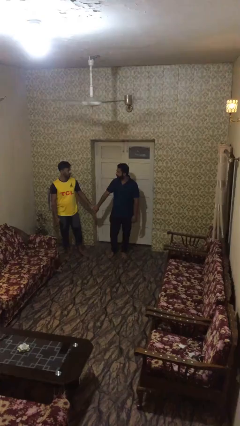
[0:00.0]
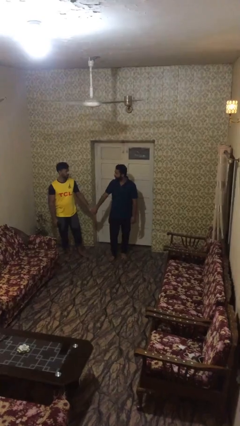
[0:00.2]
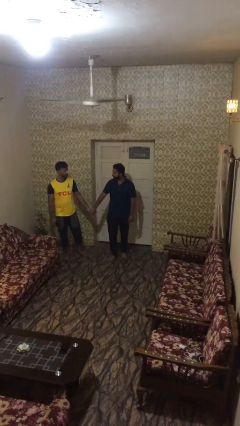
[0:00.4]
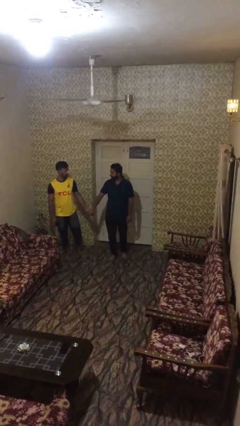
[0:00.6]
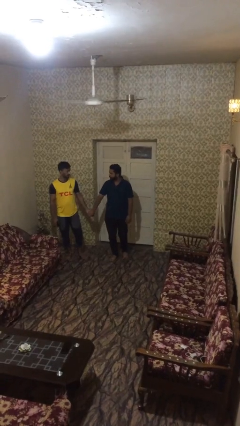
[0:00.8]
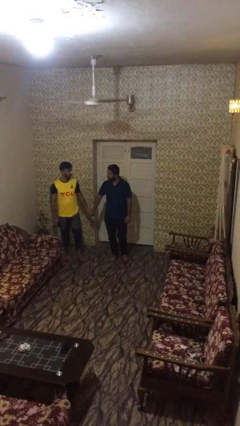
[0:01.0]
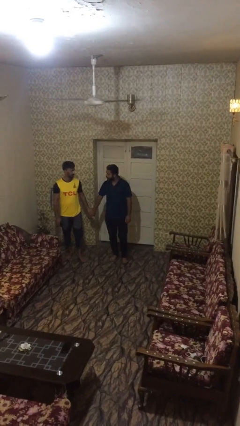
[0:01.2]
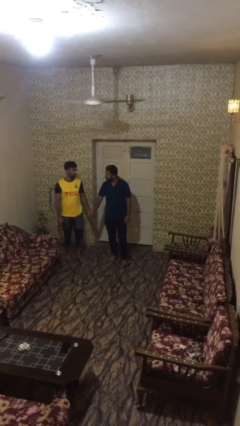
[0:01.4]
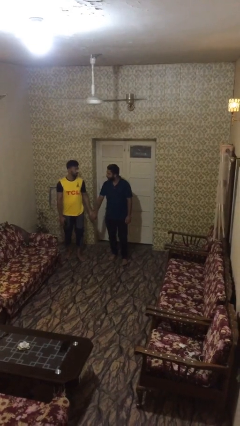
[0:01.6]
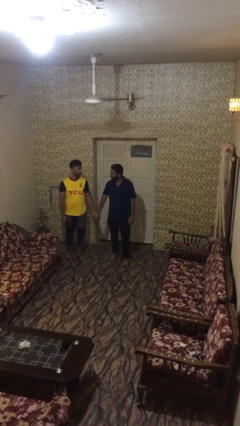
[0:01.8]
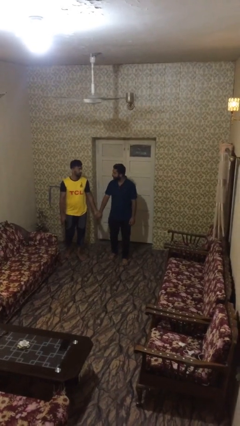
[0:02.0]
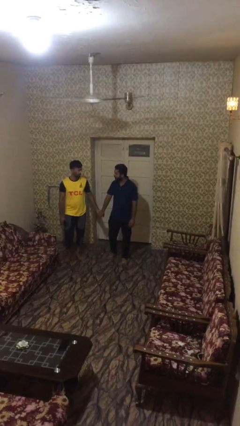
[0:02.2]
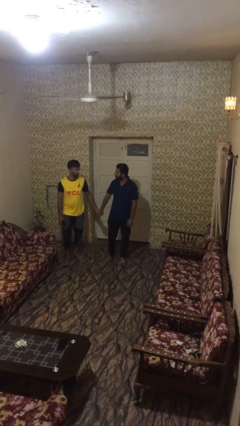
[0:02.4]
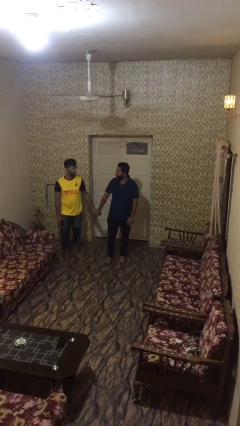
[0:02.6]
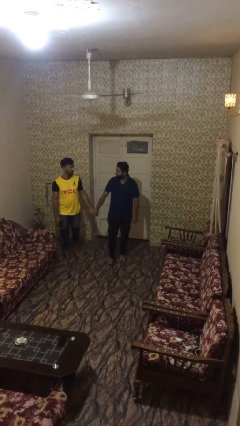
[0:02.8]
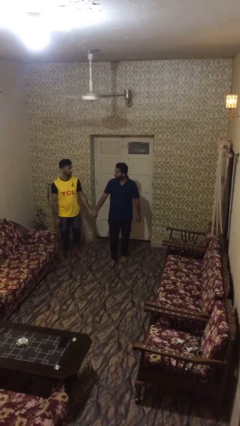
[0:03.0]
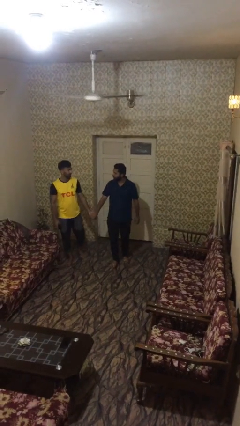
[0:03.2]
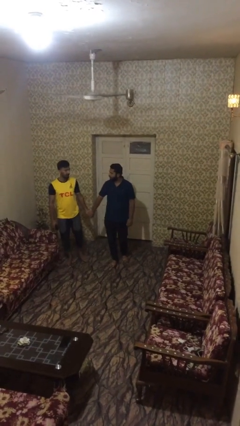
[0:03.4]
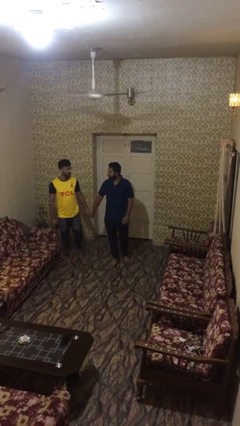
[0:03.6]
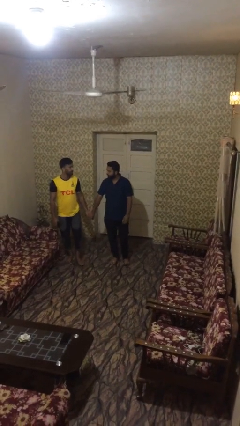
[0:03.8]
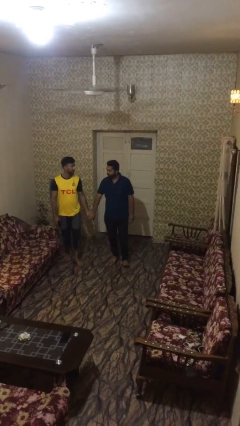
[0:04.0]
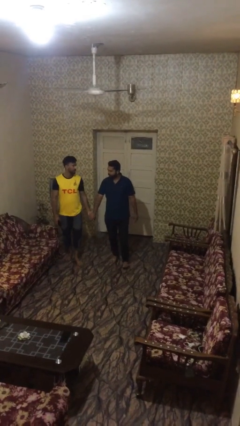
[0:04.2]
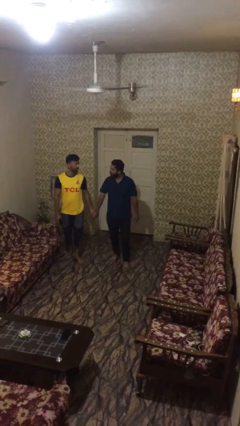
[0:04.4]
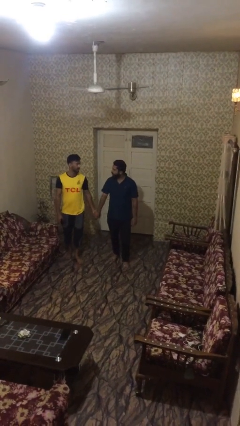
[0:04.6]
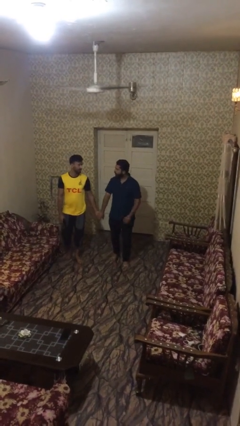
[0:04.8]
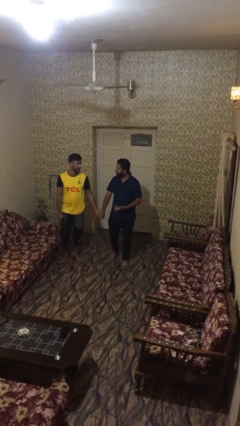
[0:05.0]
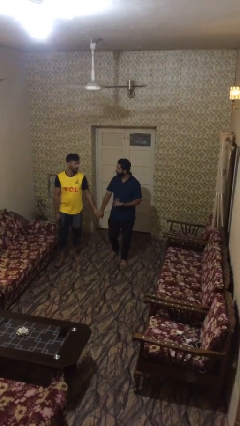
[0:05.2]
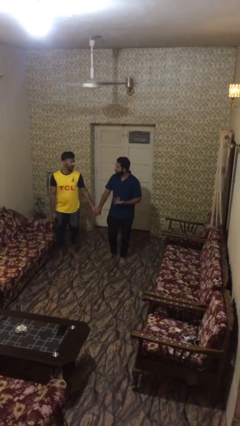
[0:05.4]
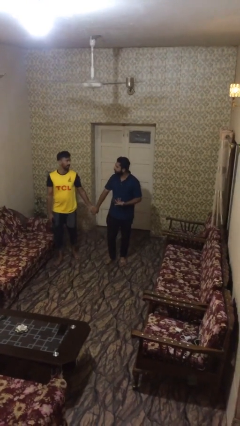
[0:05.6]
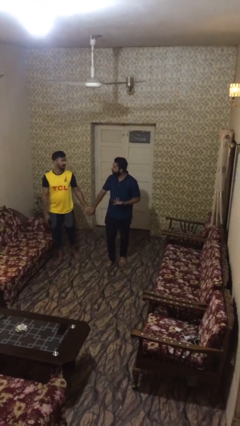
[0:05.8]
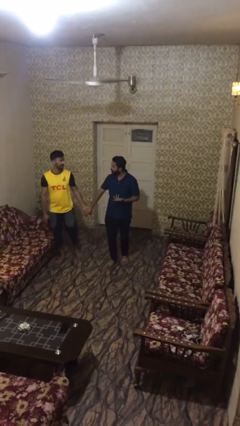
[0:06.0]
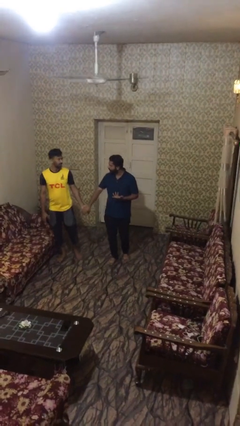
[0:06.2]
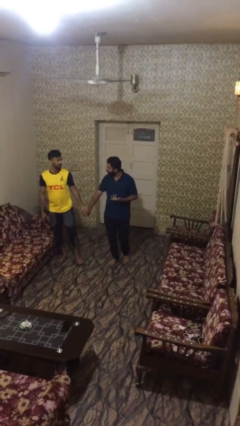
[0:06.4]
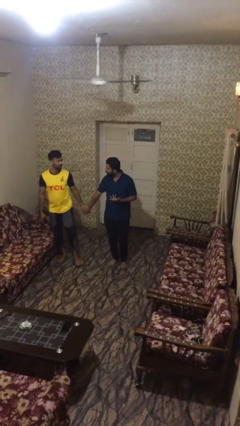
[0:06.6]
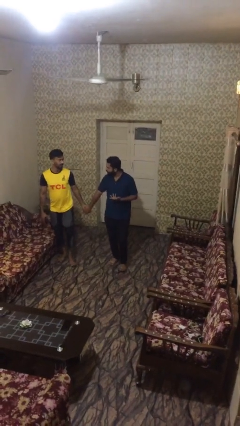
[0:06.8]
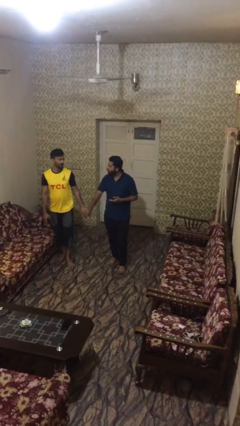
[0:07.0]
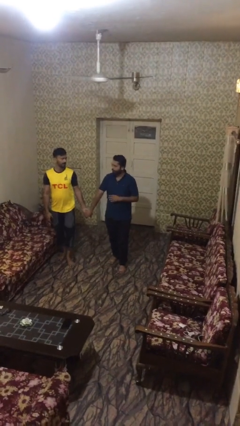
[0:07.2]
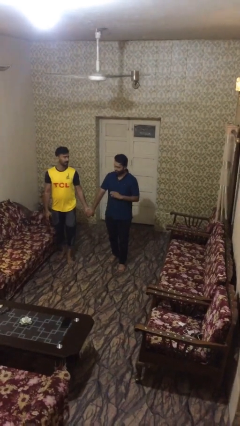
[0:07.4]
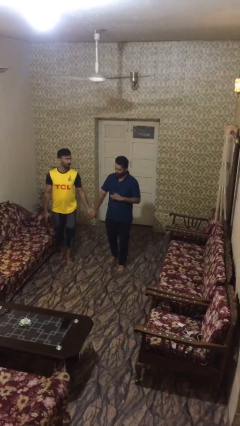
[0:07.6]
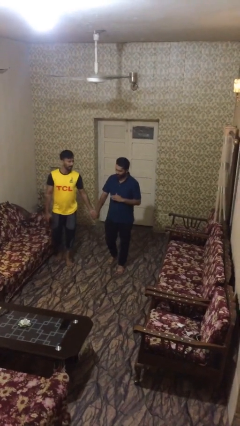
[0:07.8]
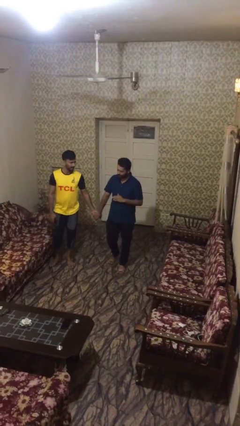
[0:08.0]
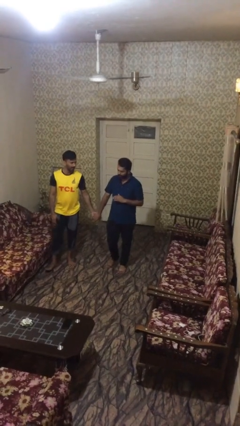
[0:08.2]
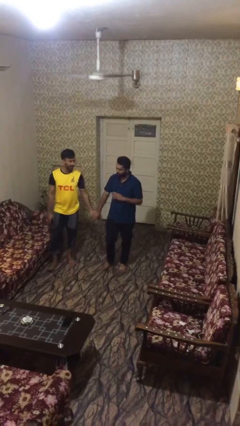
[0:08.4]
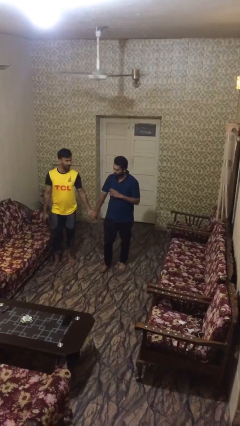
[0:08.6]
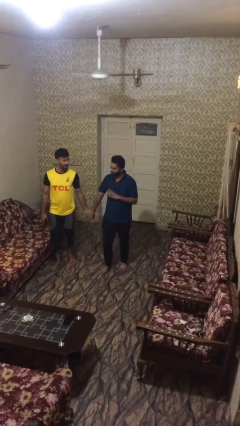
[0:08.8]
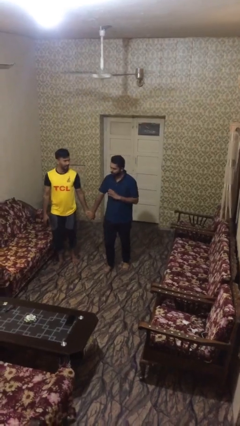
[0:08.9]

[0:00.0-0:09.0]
person holds hand

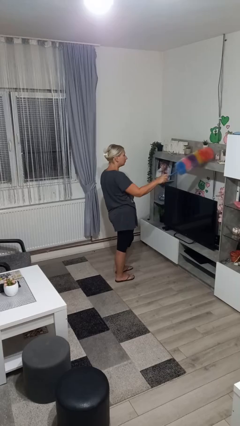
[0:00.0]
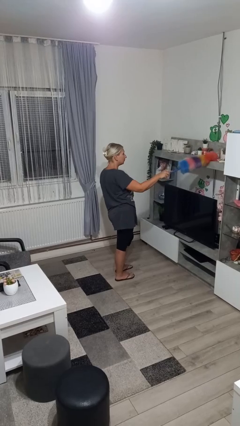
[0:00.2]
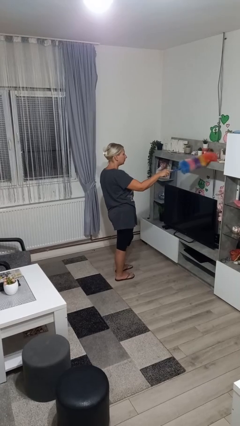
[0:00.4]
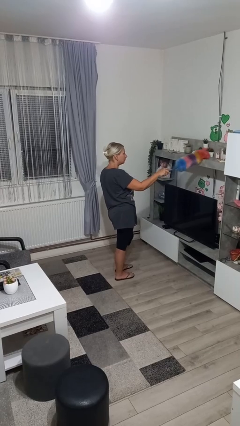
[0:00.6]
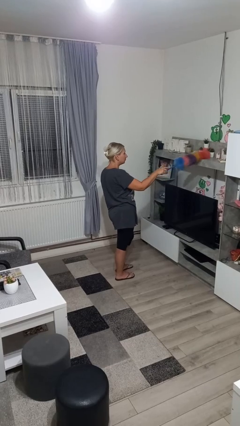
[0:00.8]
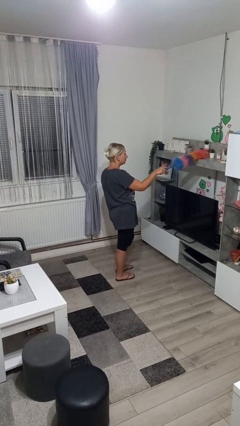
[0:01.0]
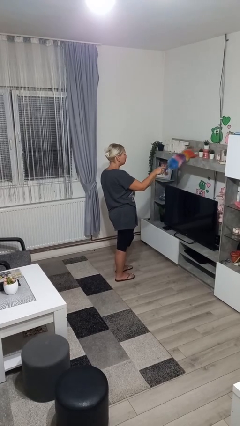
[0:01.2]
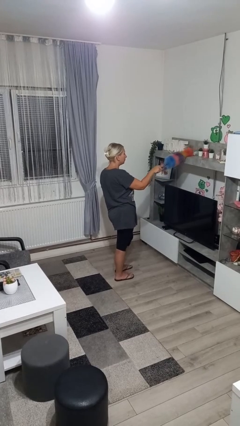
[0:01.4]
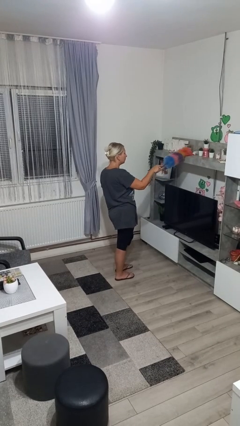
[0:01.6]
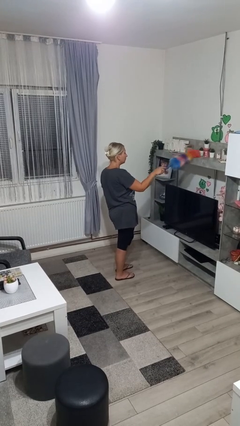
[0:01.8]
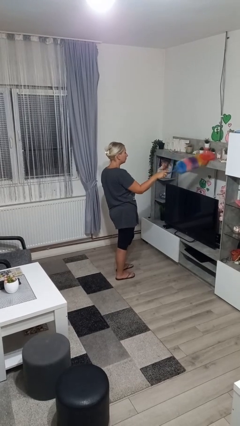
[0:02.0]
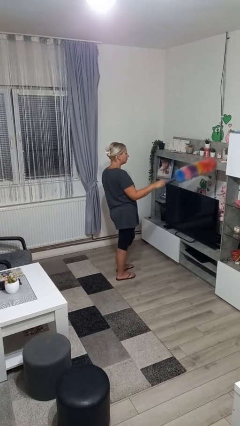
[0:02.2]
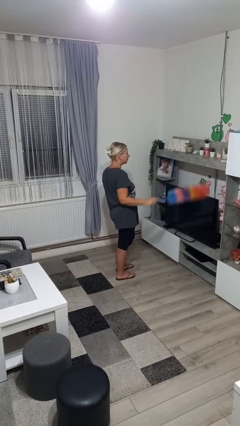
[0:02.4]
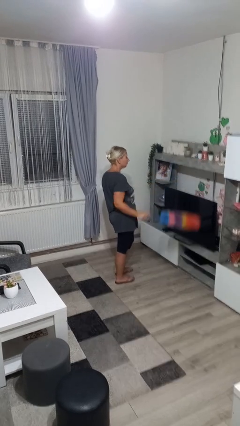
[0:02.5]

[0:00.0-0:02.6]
person dusts furniture

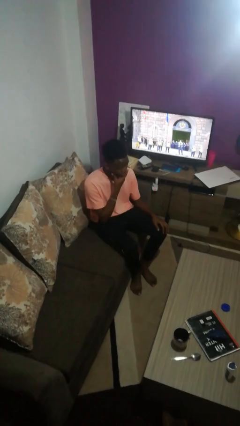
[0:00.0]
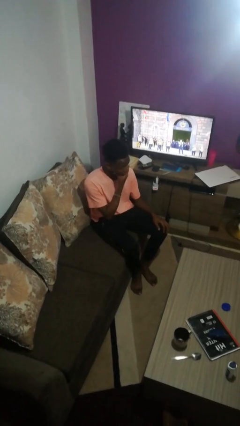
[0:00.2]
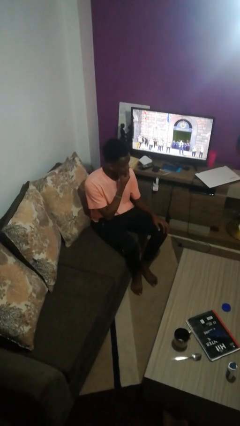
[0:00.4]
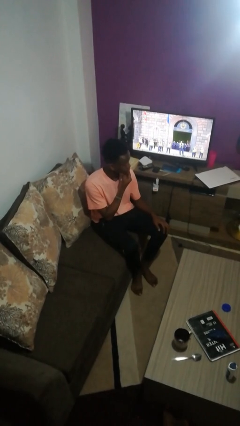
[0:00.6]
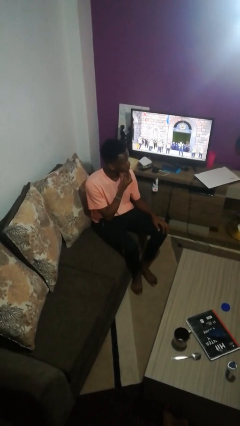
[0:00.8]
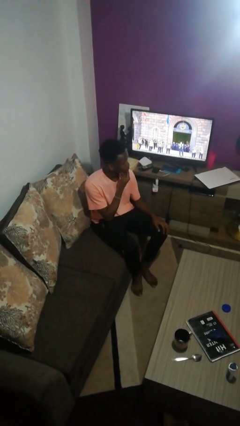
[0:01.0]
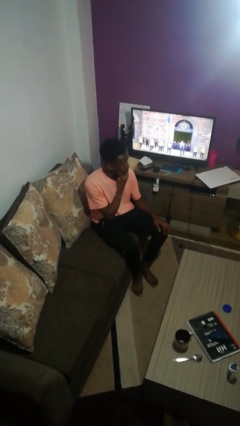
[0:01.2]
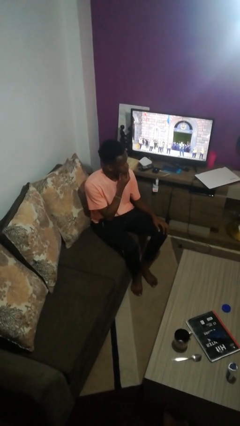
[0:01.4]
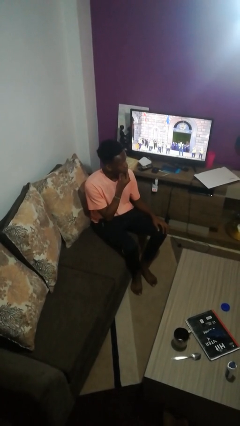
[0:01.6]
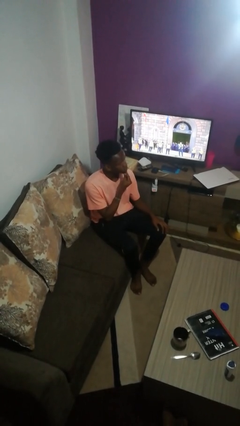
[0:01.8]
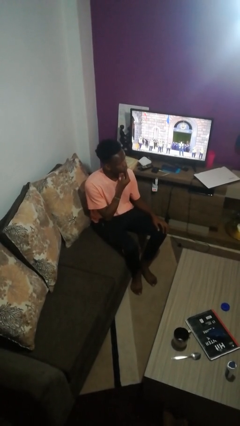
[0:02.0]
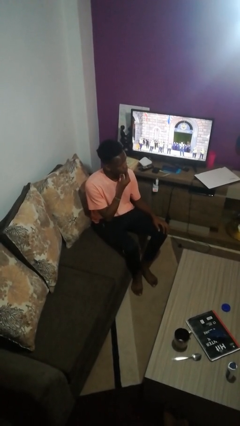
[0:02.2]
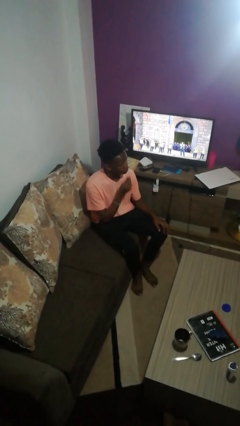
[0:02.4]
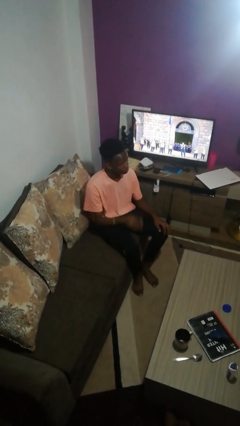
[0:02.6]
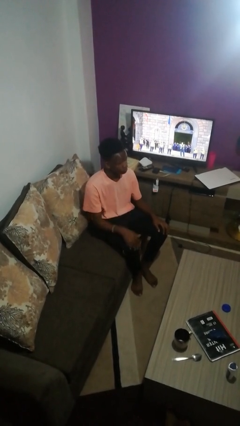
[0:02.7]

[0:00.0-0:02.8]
person strokes chin

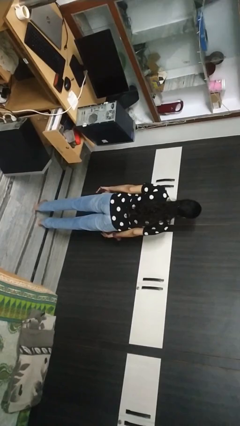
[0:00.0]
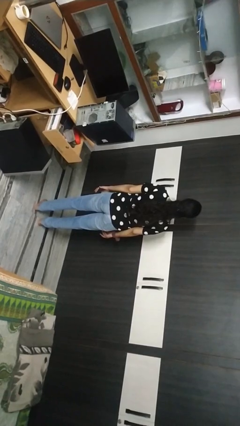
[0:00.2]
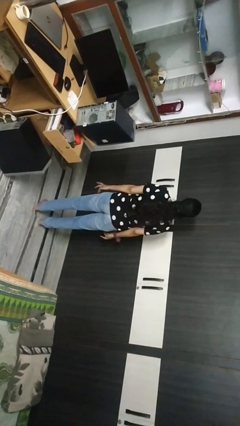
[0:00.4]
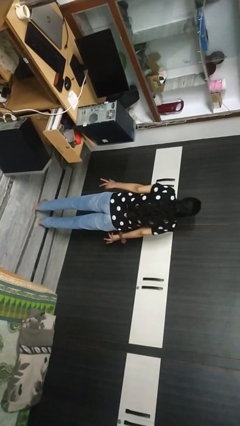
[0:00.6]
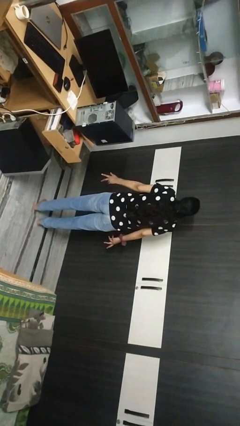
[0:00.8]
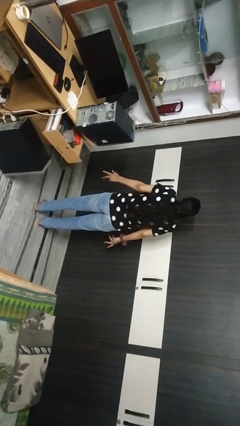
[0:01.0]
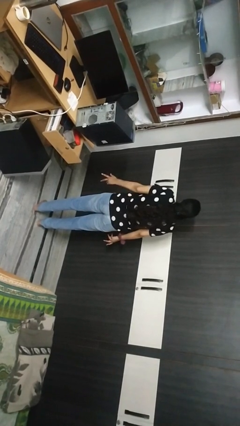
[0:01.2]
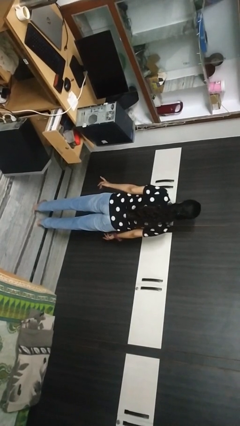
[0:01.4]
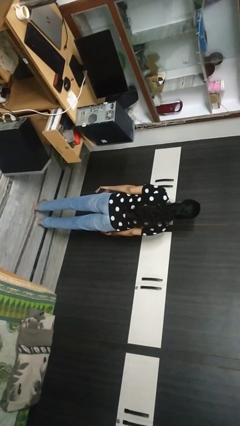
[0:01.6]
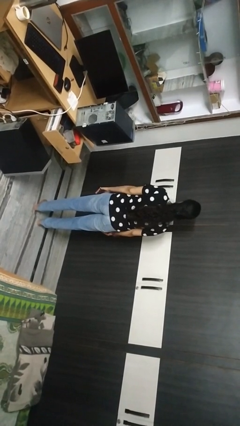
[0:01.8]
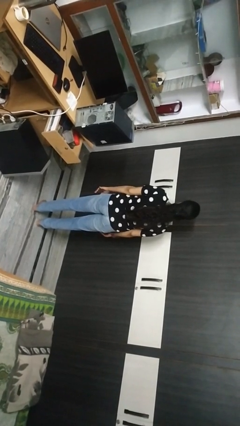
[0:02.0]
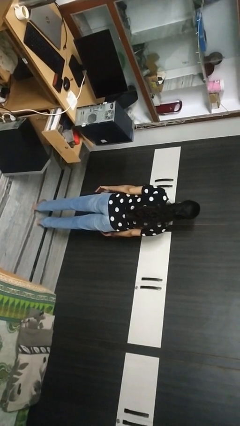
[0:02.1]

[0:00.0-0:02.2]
person shrugs

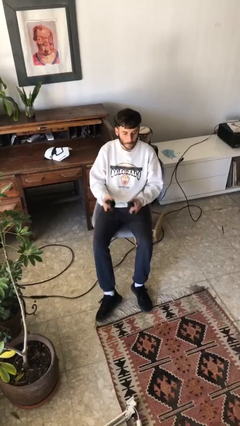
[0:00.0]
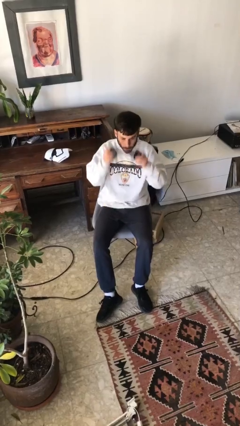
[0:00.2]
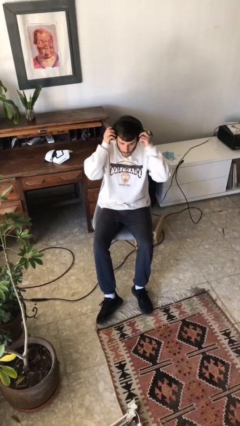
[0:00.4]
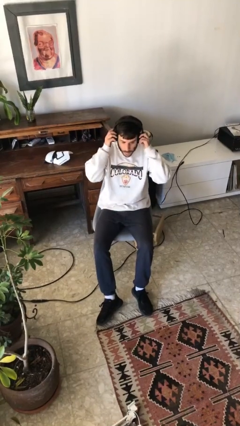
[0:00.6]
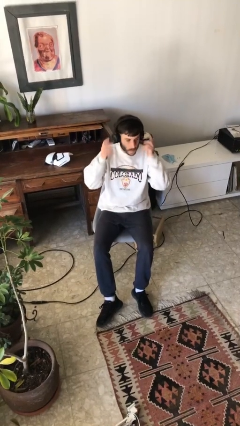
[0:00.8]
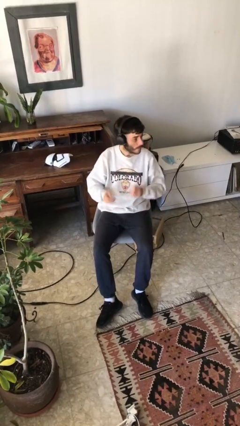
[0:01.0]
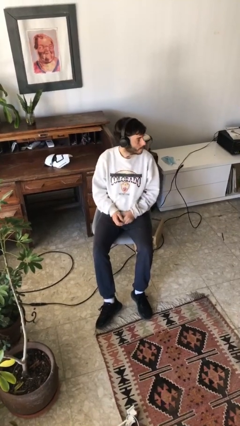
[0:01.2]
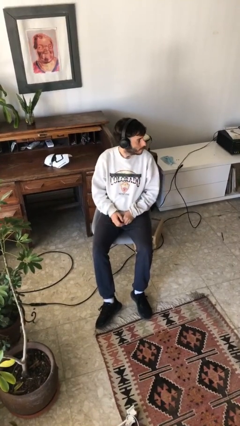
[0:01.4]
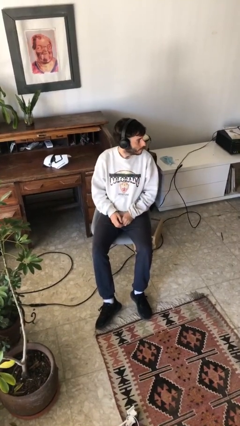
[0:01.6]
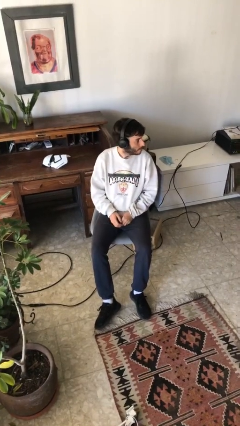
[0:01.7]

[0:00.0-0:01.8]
person puts on headphones
